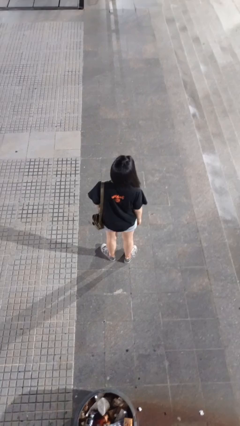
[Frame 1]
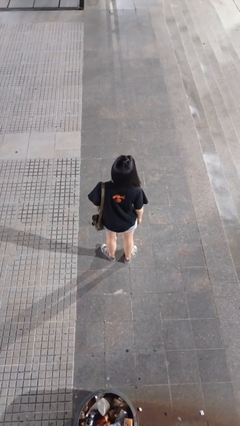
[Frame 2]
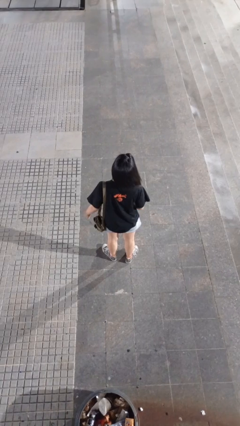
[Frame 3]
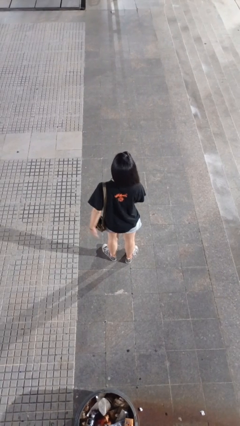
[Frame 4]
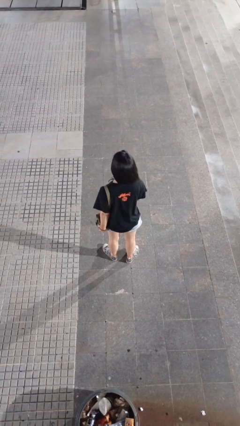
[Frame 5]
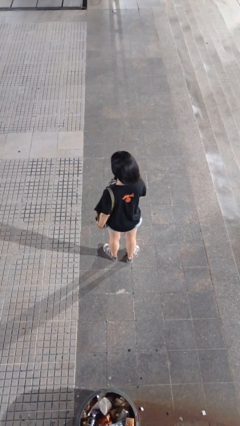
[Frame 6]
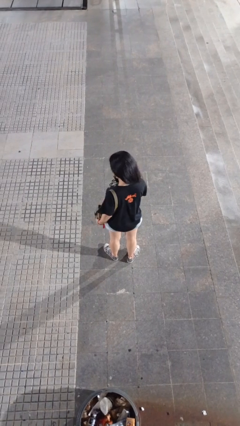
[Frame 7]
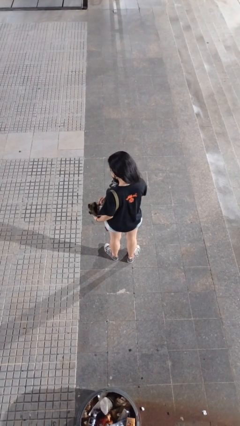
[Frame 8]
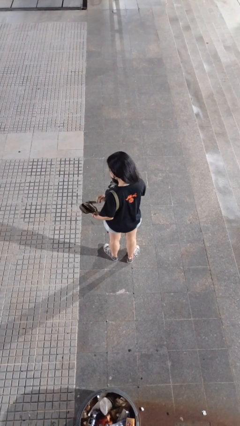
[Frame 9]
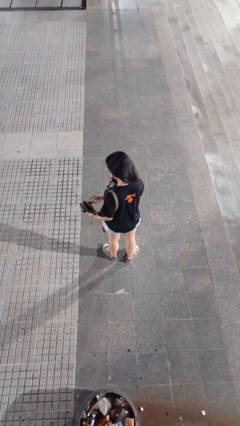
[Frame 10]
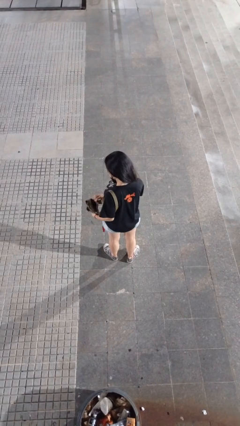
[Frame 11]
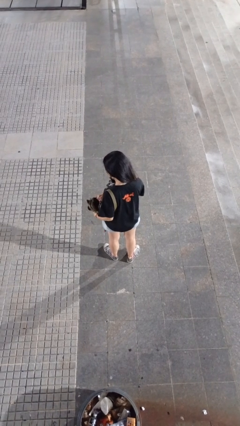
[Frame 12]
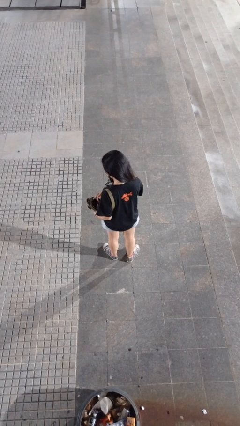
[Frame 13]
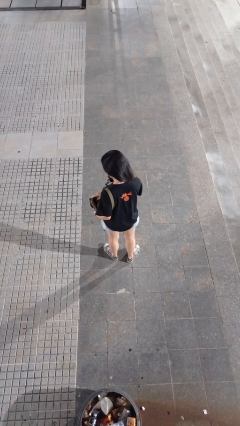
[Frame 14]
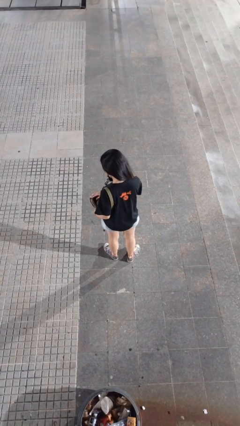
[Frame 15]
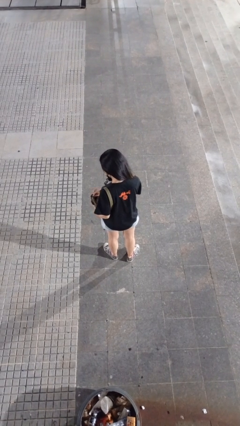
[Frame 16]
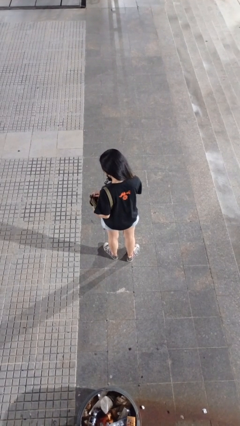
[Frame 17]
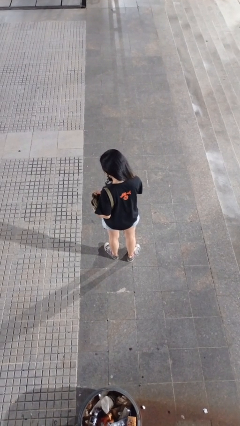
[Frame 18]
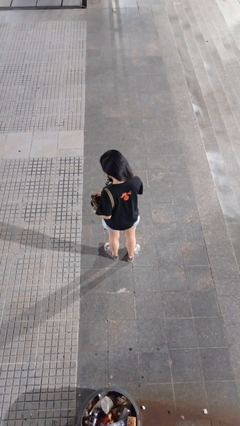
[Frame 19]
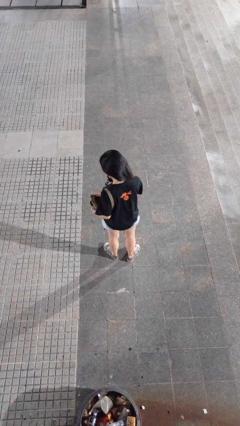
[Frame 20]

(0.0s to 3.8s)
person searches in purse

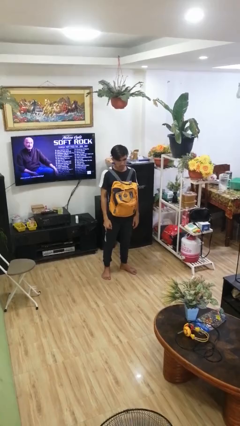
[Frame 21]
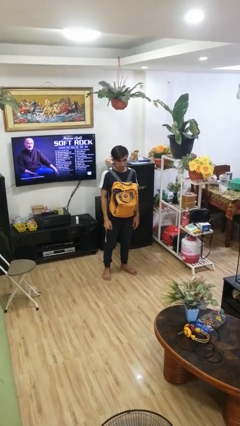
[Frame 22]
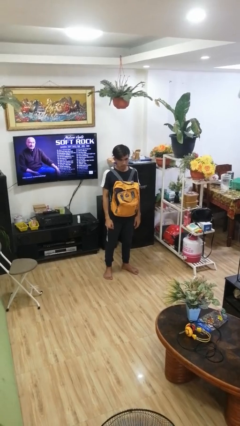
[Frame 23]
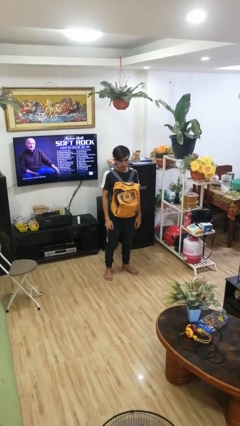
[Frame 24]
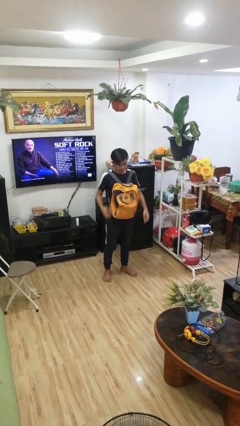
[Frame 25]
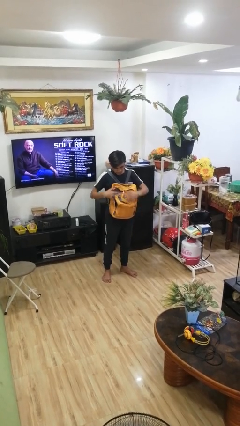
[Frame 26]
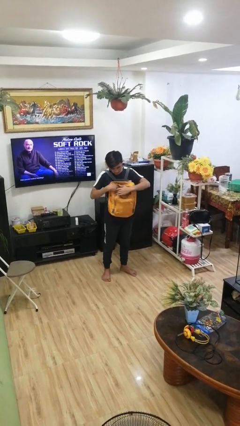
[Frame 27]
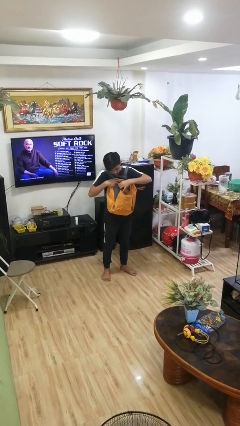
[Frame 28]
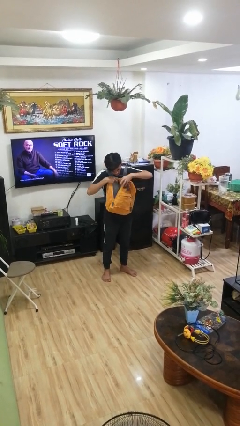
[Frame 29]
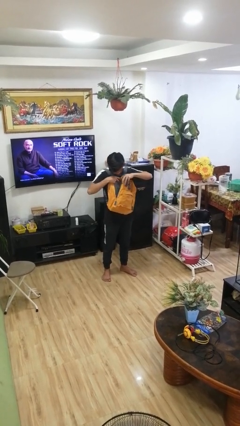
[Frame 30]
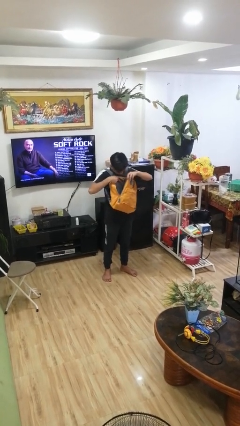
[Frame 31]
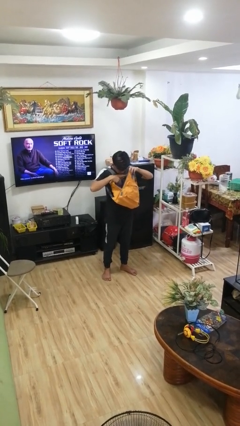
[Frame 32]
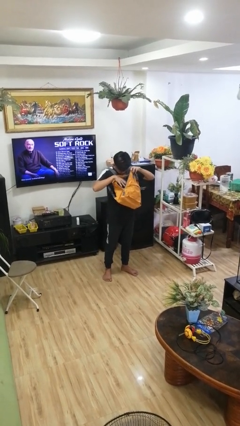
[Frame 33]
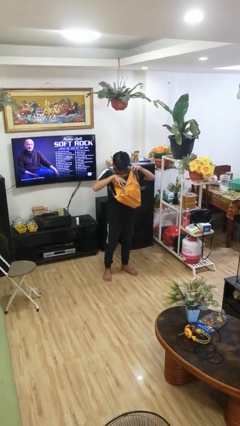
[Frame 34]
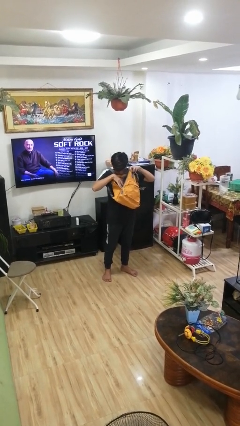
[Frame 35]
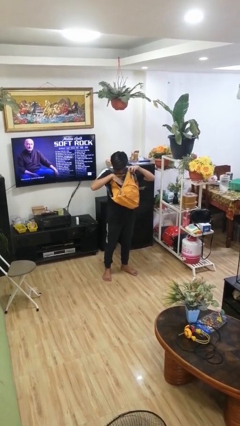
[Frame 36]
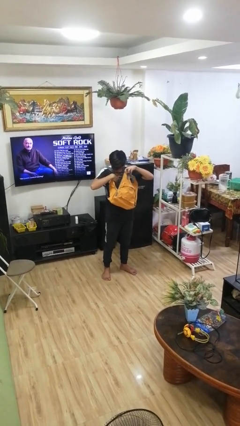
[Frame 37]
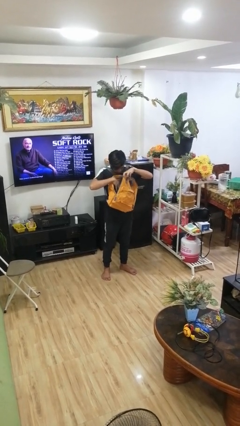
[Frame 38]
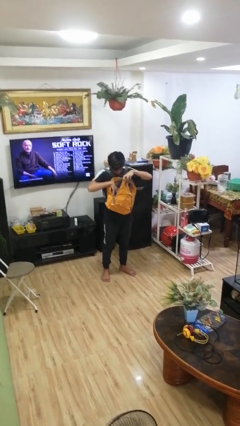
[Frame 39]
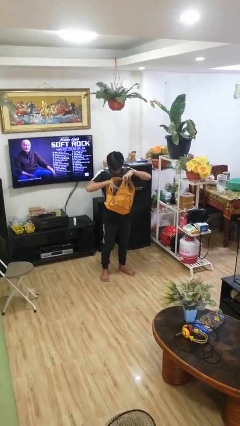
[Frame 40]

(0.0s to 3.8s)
person searches in backpack

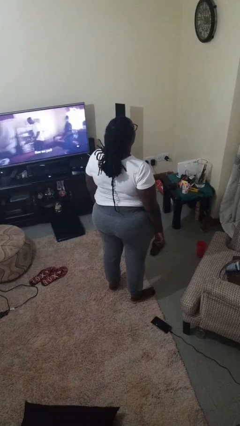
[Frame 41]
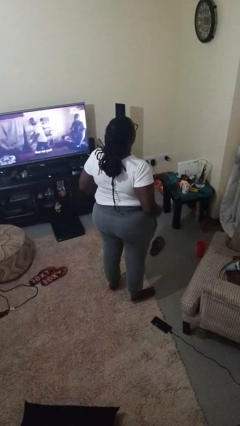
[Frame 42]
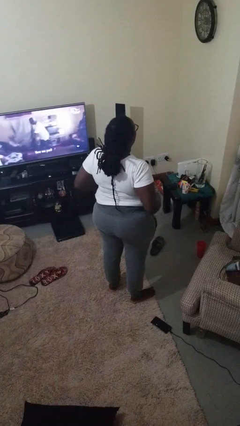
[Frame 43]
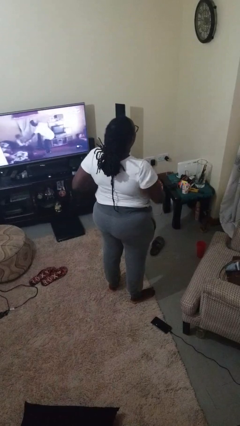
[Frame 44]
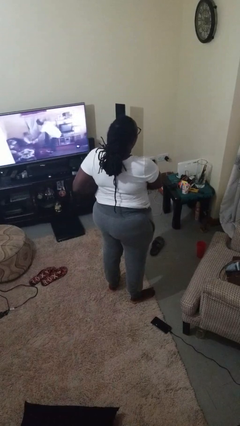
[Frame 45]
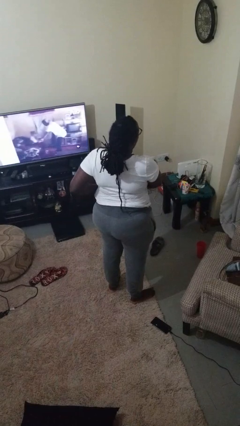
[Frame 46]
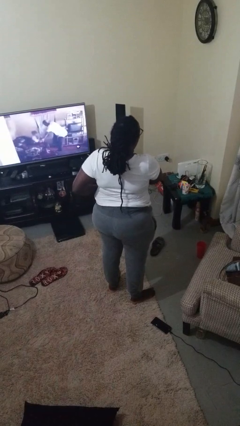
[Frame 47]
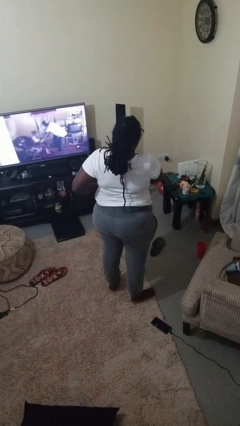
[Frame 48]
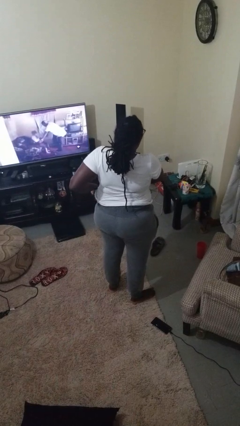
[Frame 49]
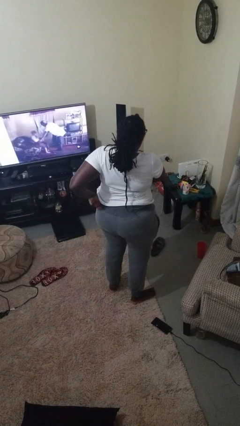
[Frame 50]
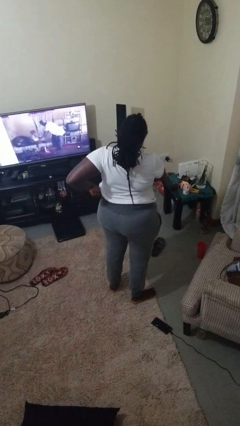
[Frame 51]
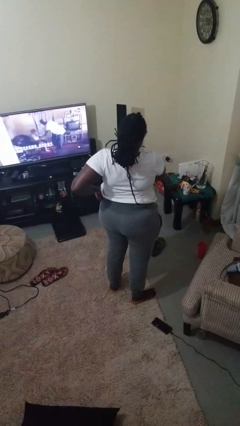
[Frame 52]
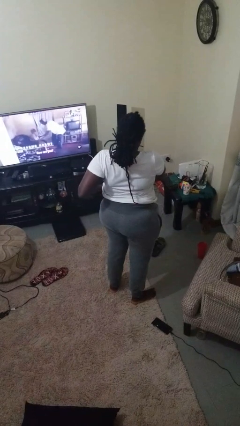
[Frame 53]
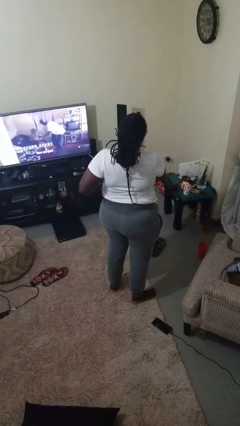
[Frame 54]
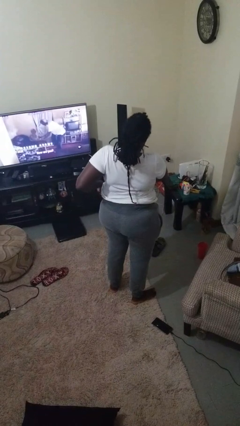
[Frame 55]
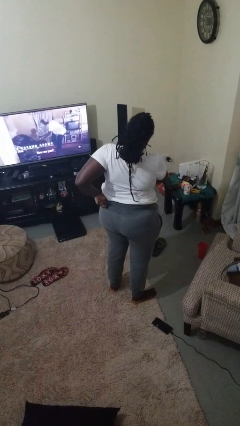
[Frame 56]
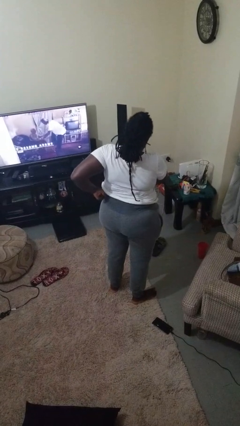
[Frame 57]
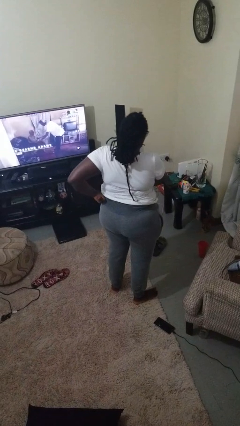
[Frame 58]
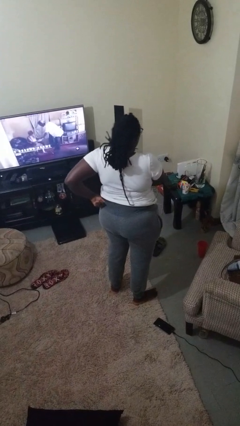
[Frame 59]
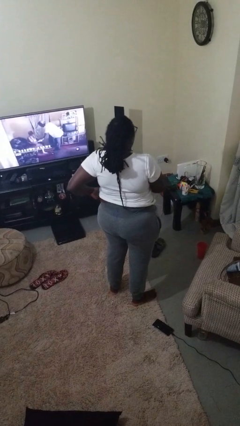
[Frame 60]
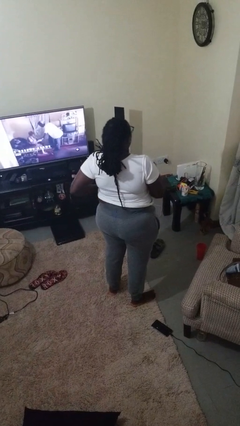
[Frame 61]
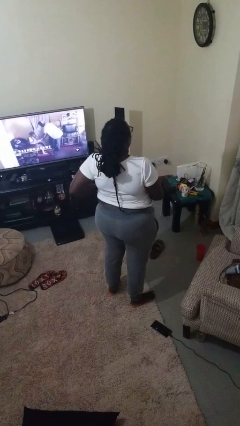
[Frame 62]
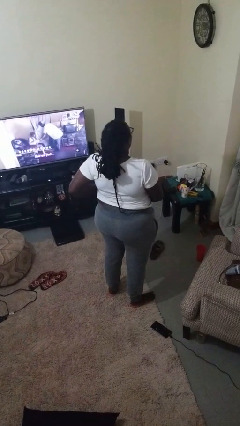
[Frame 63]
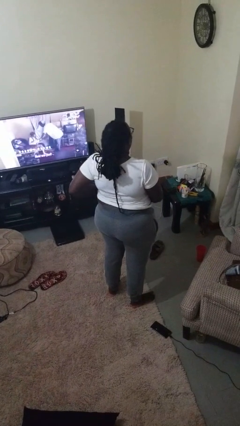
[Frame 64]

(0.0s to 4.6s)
person hikes up pants

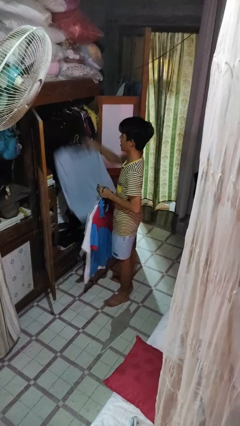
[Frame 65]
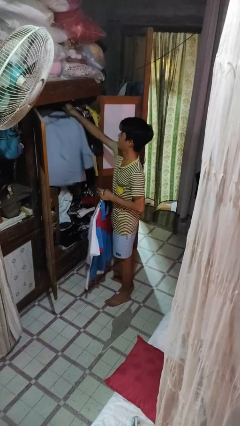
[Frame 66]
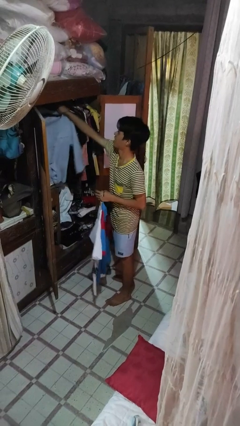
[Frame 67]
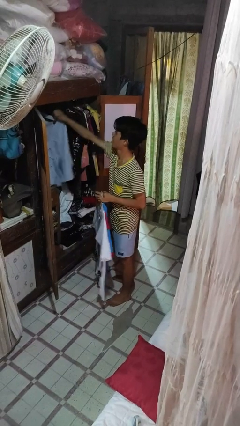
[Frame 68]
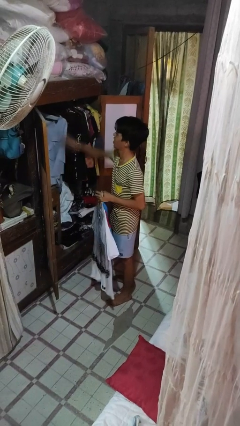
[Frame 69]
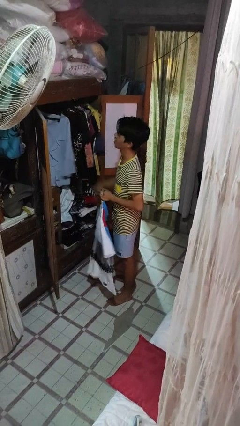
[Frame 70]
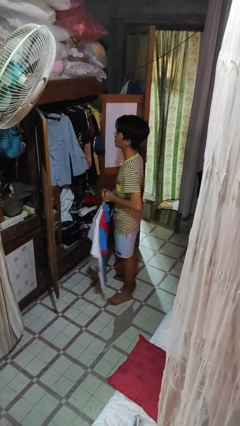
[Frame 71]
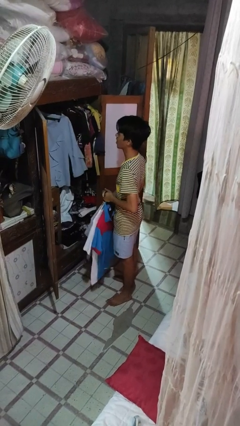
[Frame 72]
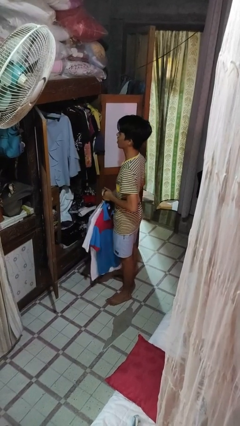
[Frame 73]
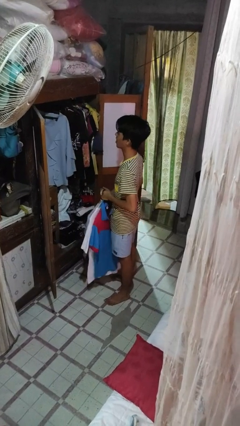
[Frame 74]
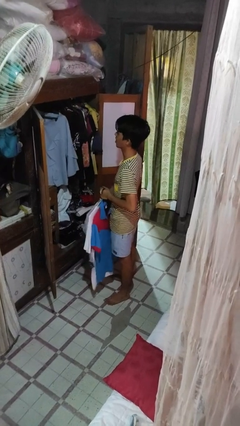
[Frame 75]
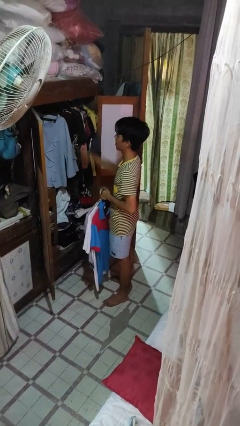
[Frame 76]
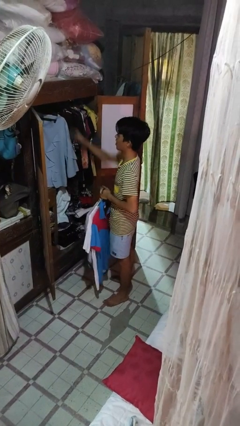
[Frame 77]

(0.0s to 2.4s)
person puts clothes into closet

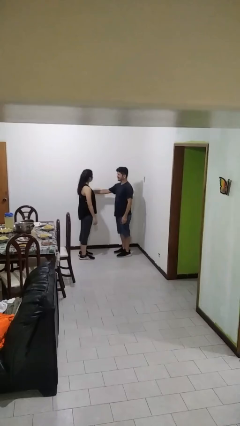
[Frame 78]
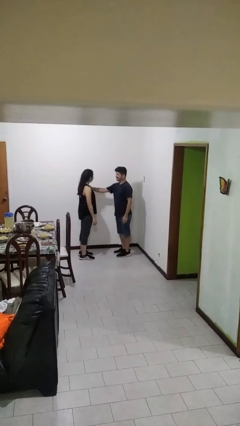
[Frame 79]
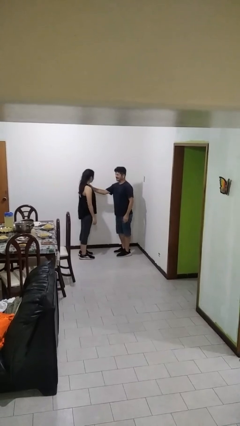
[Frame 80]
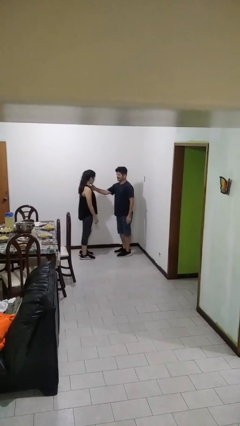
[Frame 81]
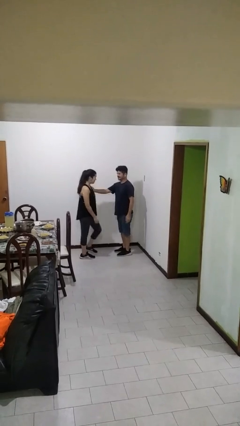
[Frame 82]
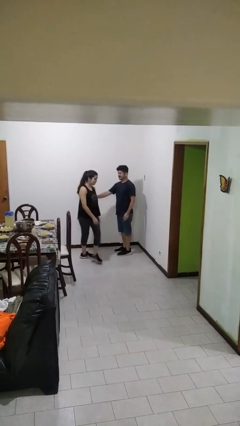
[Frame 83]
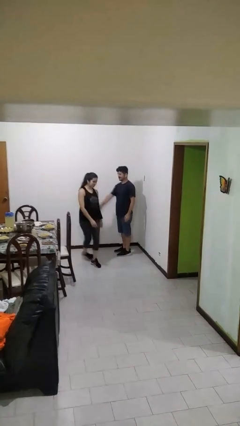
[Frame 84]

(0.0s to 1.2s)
person shoves person

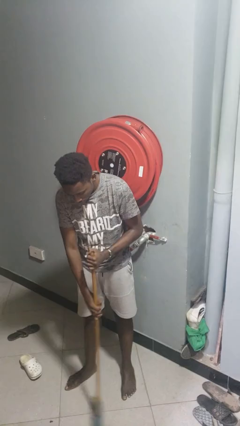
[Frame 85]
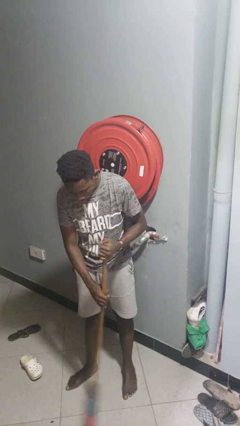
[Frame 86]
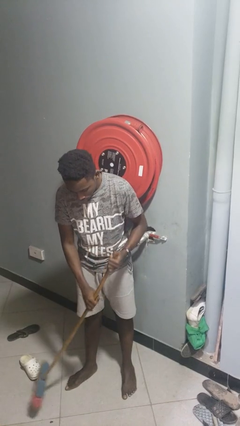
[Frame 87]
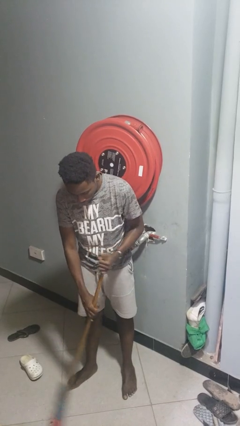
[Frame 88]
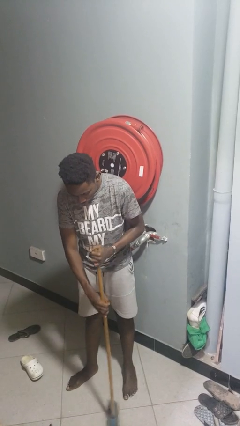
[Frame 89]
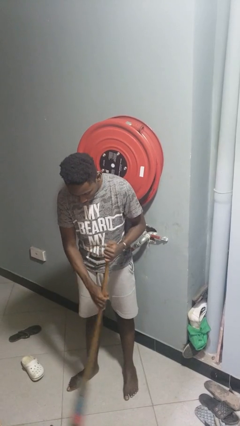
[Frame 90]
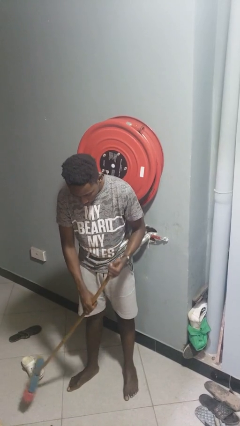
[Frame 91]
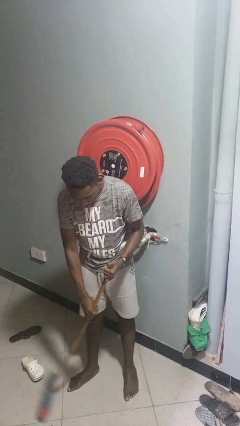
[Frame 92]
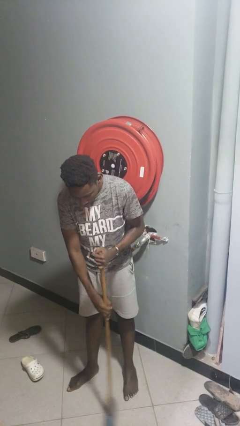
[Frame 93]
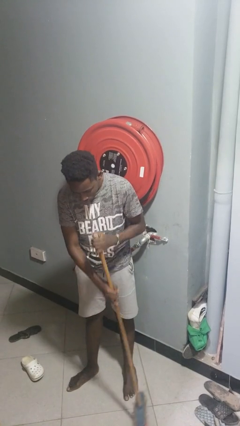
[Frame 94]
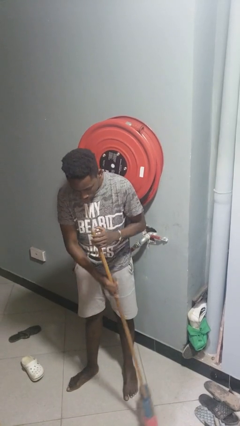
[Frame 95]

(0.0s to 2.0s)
person sweeps floor
